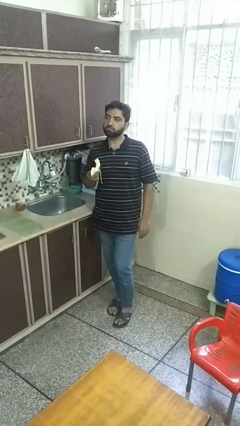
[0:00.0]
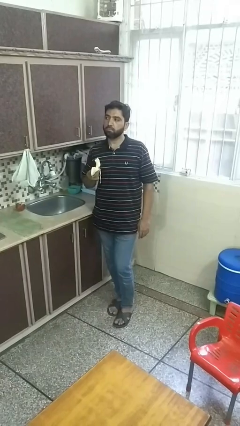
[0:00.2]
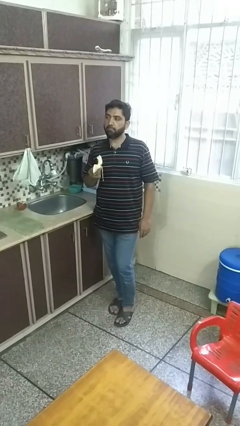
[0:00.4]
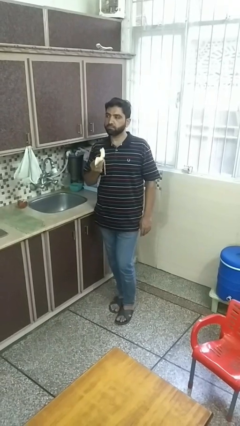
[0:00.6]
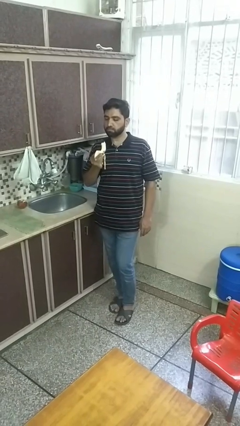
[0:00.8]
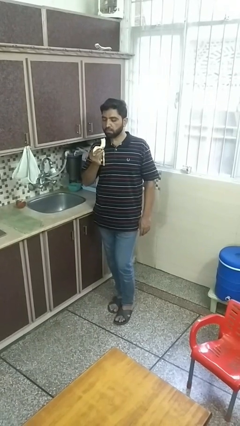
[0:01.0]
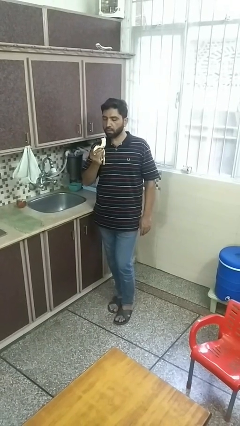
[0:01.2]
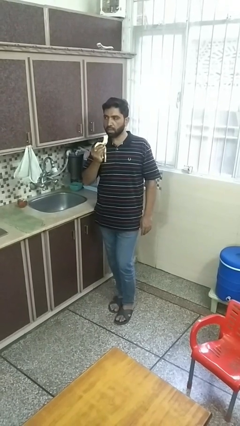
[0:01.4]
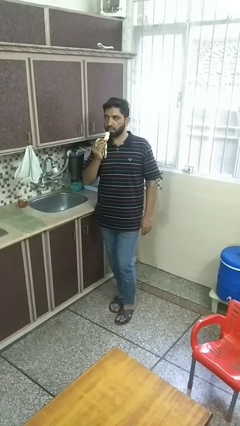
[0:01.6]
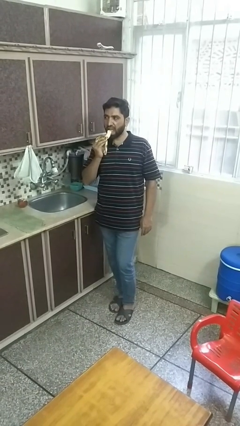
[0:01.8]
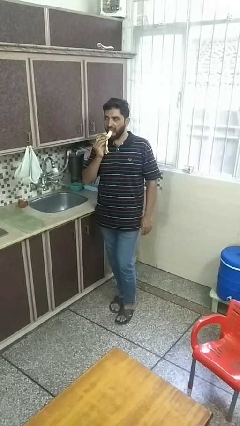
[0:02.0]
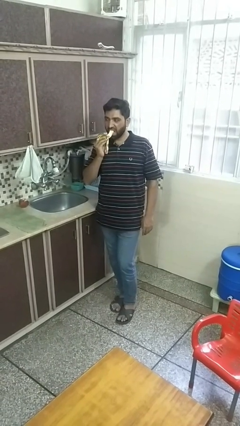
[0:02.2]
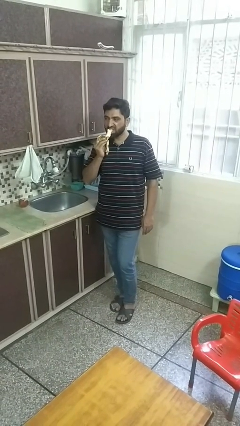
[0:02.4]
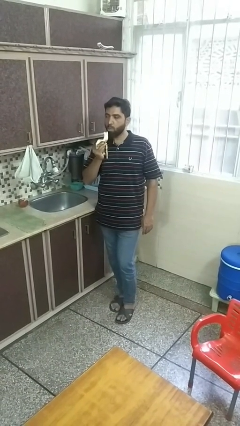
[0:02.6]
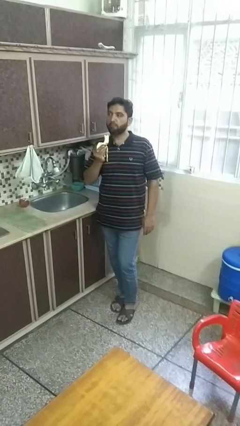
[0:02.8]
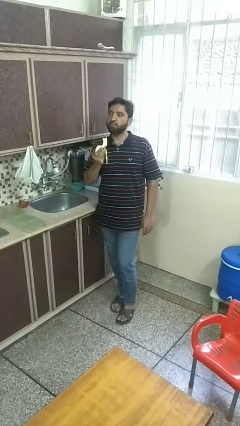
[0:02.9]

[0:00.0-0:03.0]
person eats banana

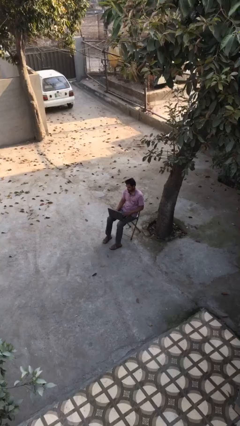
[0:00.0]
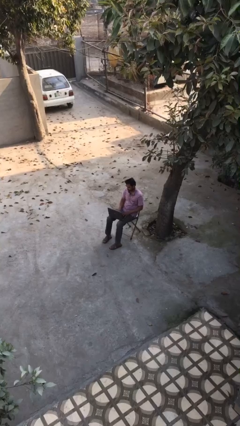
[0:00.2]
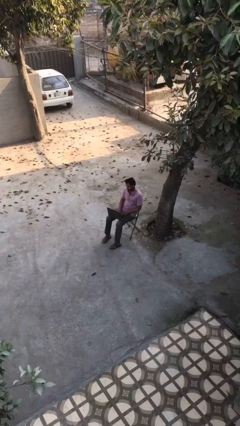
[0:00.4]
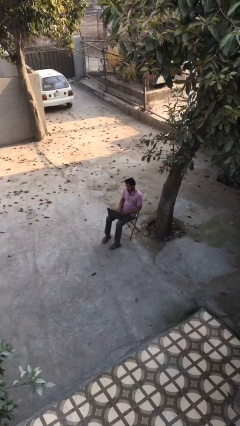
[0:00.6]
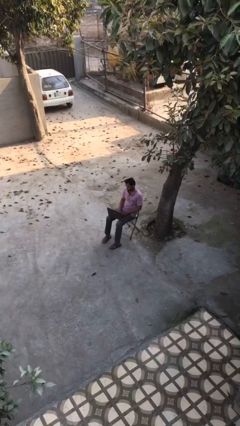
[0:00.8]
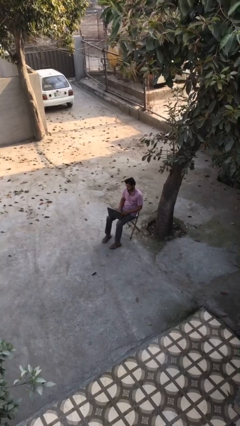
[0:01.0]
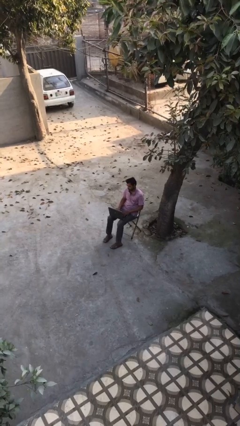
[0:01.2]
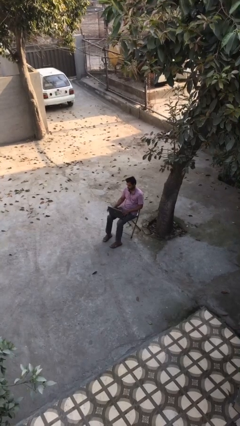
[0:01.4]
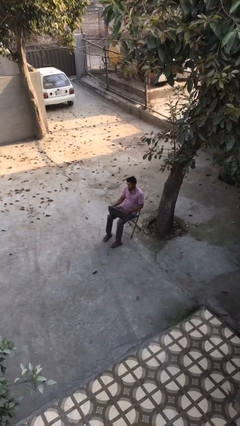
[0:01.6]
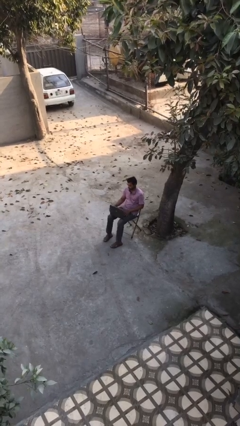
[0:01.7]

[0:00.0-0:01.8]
person interacts with laptop

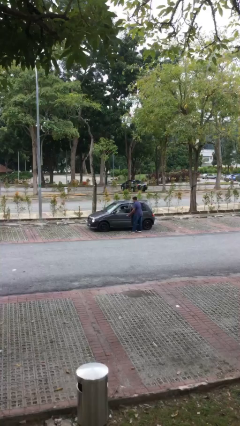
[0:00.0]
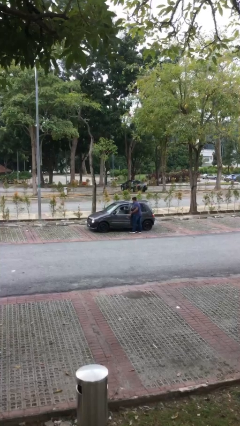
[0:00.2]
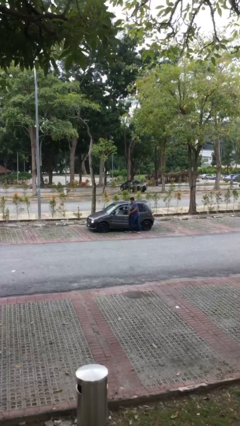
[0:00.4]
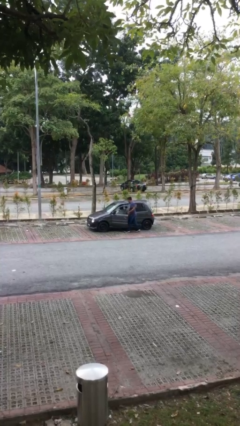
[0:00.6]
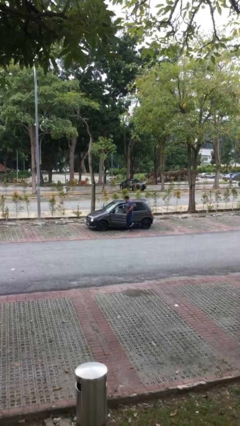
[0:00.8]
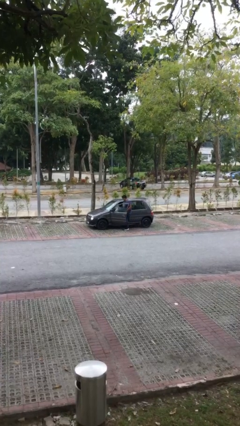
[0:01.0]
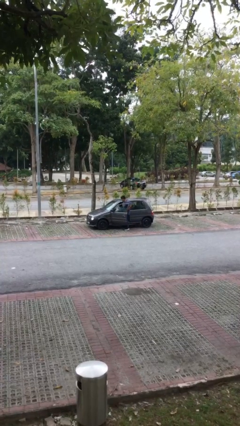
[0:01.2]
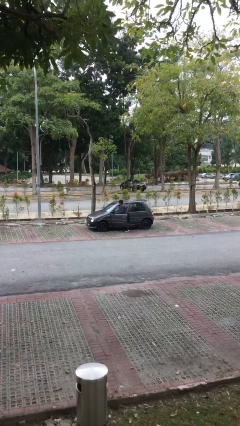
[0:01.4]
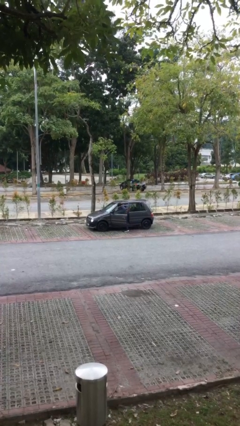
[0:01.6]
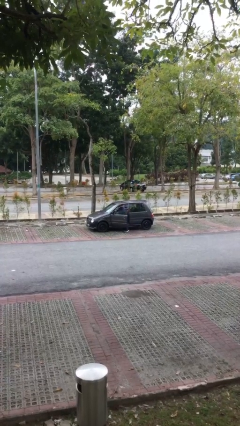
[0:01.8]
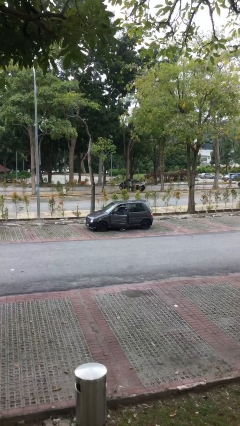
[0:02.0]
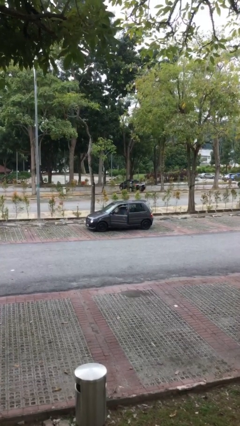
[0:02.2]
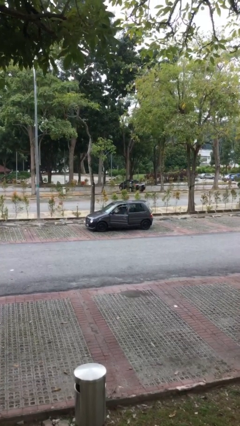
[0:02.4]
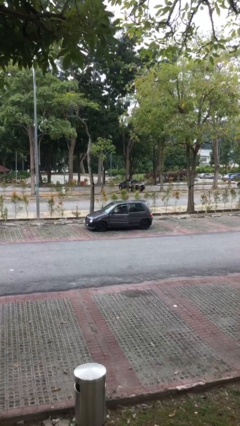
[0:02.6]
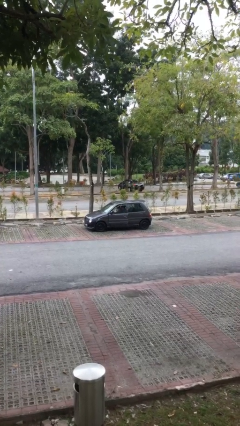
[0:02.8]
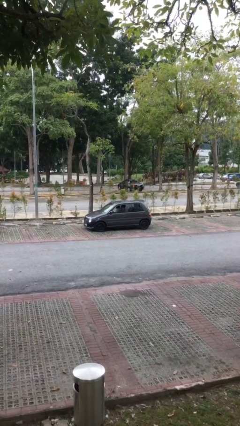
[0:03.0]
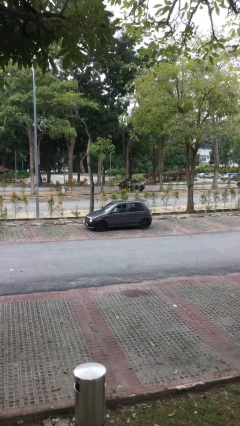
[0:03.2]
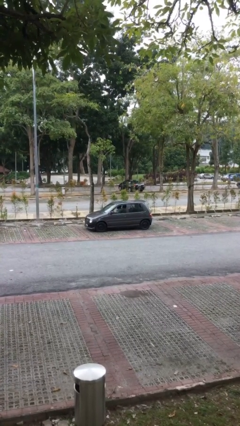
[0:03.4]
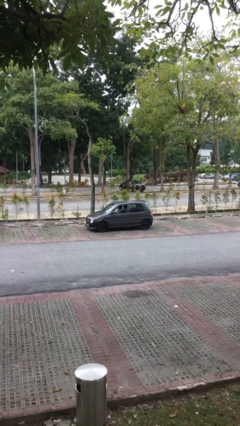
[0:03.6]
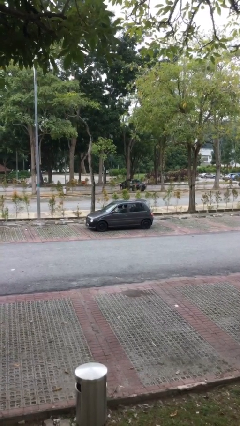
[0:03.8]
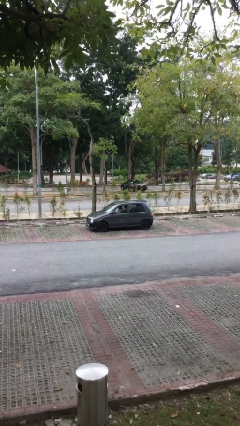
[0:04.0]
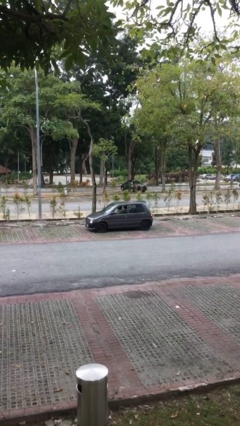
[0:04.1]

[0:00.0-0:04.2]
car picks up person

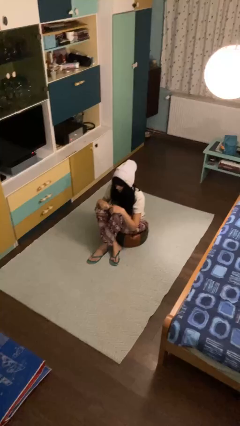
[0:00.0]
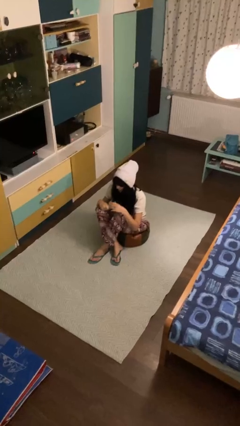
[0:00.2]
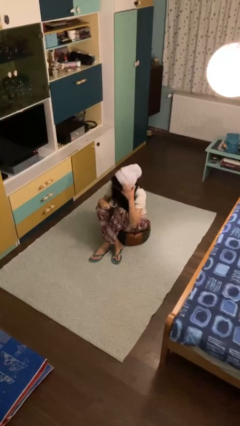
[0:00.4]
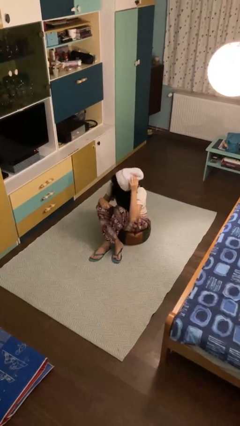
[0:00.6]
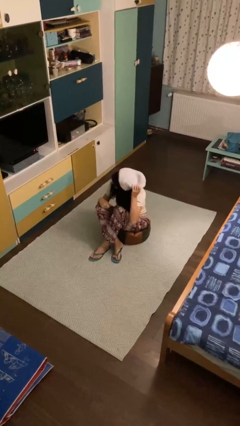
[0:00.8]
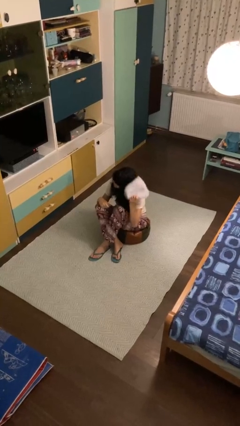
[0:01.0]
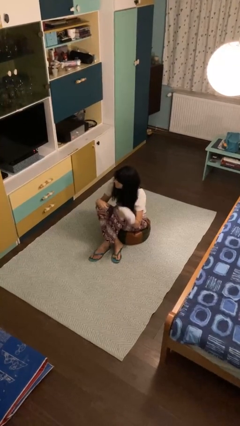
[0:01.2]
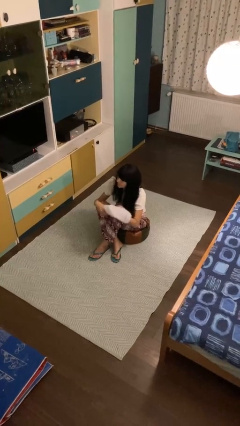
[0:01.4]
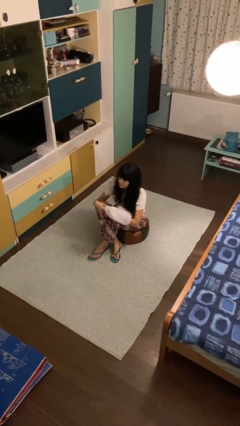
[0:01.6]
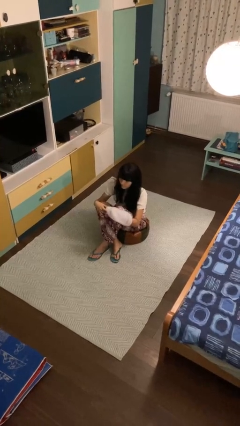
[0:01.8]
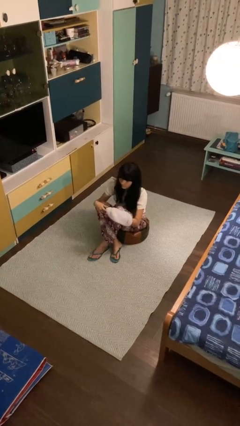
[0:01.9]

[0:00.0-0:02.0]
person takes off hat

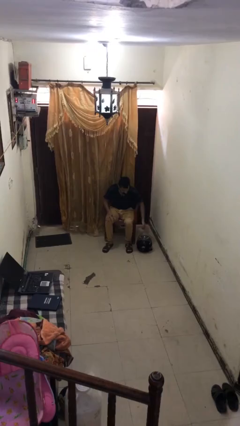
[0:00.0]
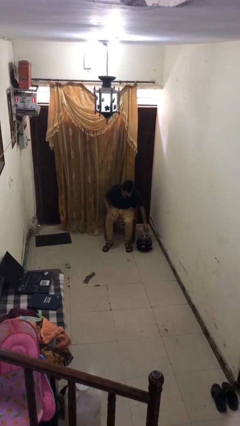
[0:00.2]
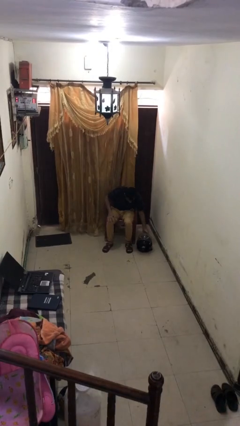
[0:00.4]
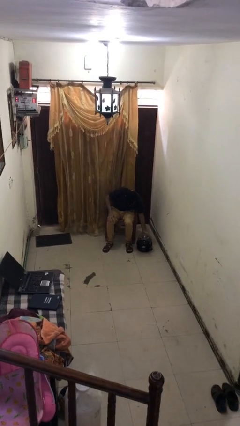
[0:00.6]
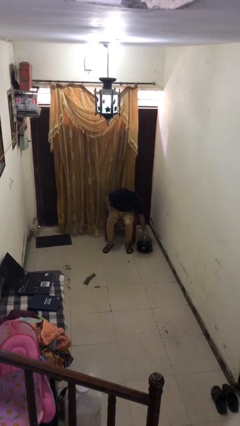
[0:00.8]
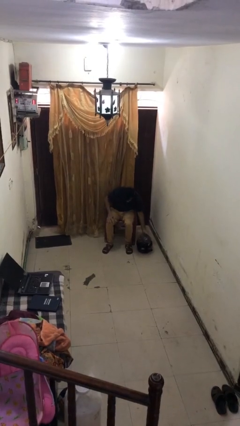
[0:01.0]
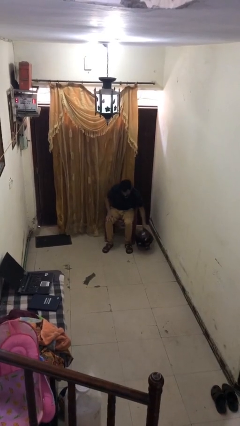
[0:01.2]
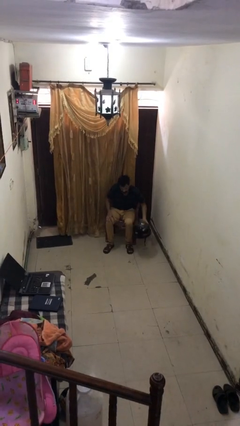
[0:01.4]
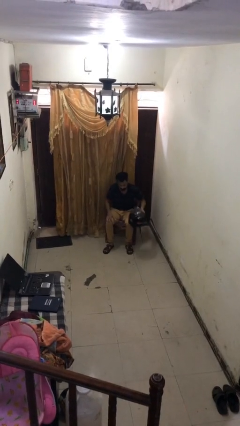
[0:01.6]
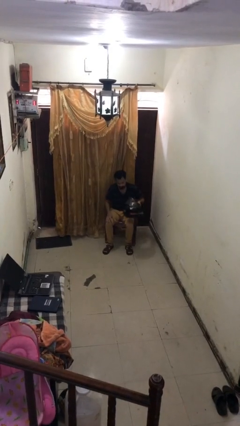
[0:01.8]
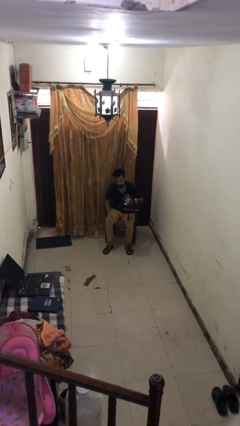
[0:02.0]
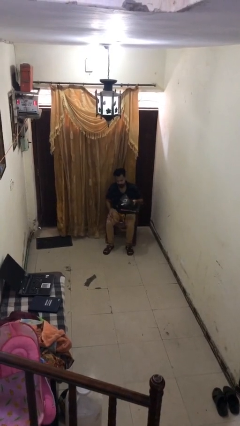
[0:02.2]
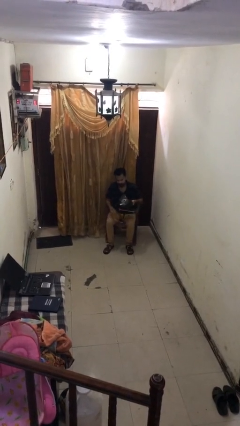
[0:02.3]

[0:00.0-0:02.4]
person picks up object from floor

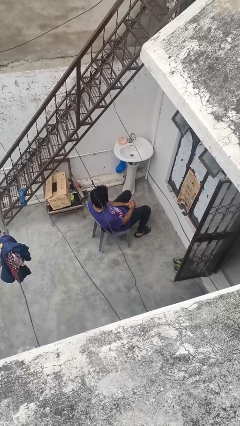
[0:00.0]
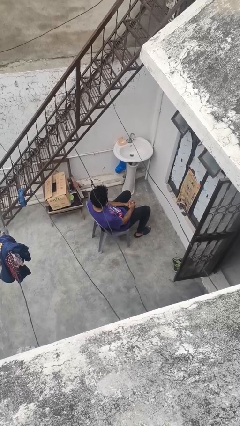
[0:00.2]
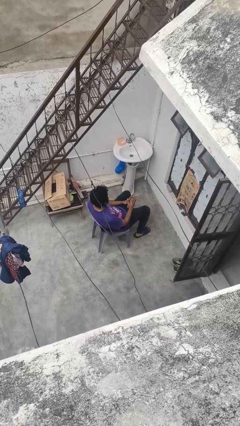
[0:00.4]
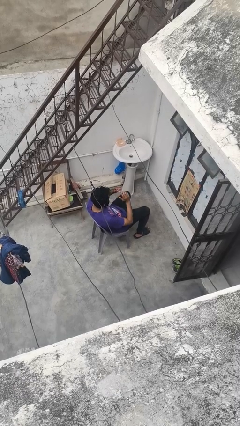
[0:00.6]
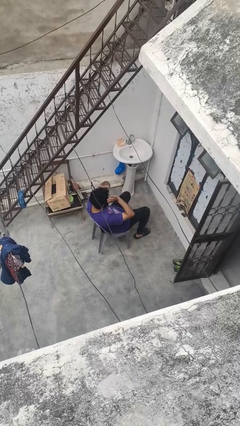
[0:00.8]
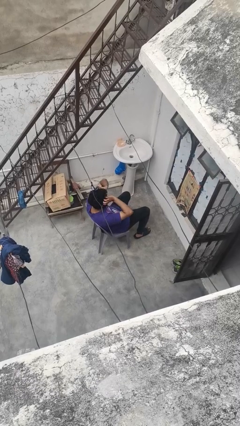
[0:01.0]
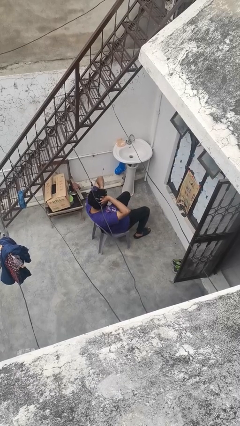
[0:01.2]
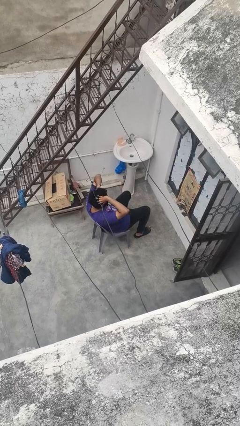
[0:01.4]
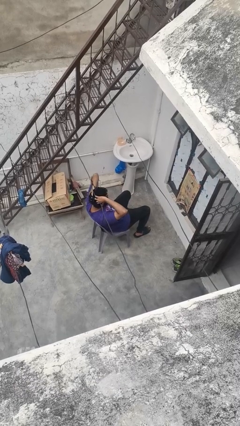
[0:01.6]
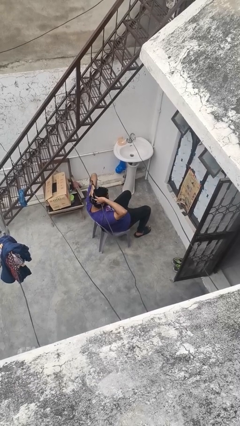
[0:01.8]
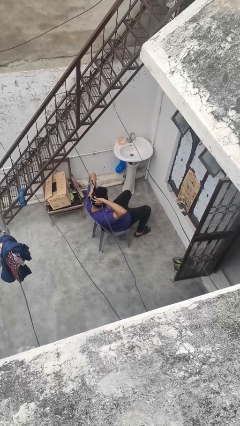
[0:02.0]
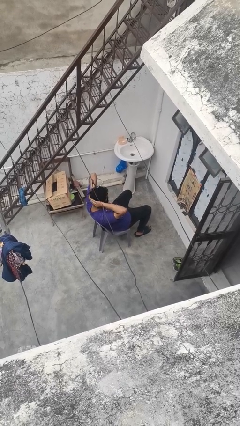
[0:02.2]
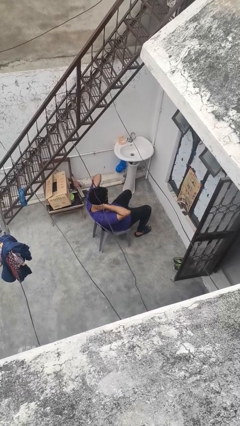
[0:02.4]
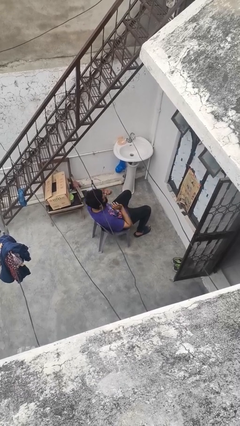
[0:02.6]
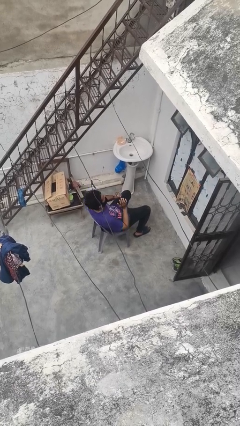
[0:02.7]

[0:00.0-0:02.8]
person strokes hair

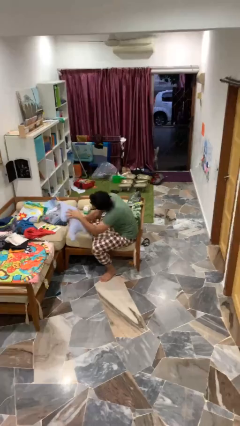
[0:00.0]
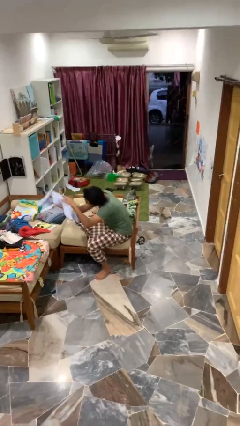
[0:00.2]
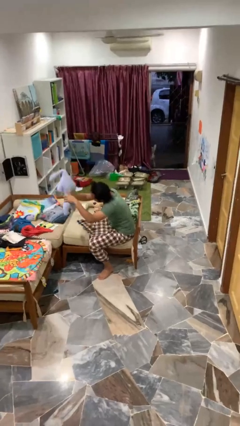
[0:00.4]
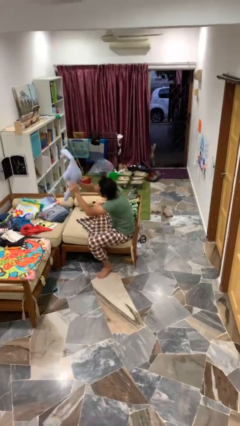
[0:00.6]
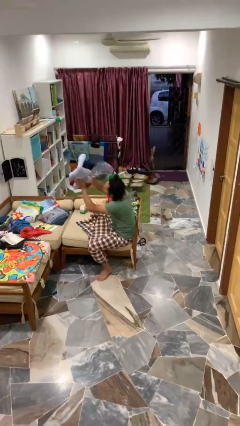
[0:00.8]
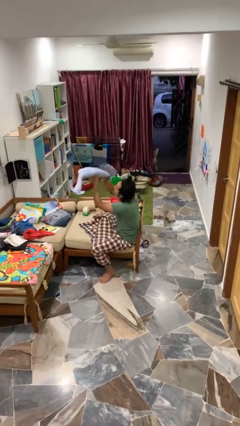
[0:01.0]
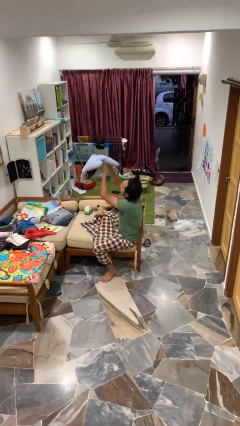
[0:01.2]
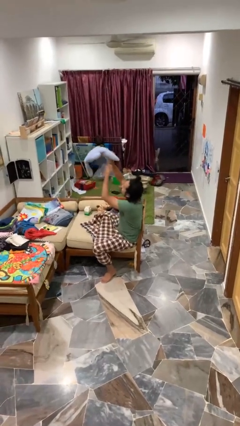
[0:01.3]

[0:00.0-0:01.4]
person catches dropped object
